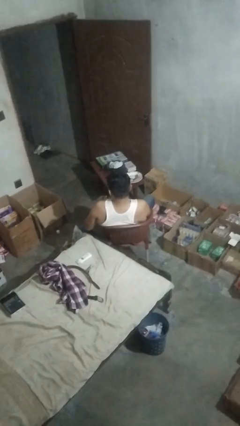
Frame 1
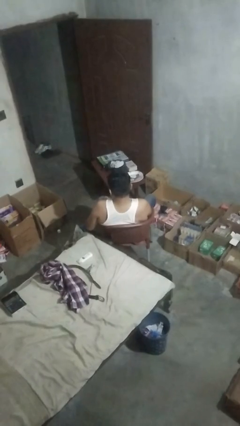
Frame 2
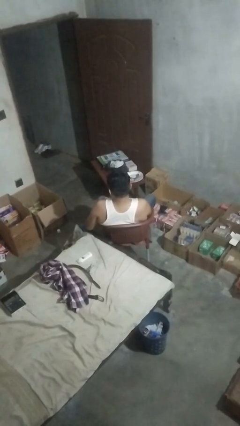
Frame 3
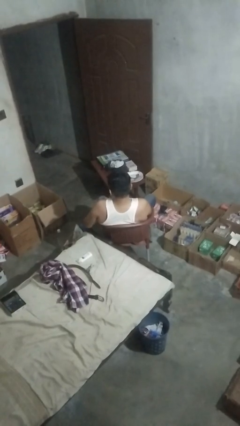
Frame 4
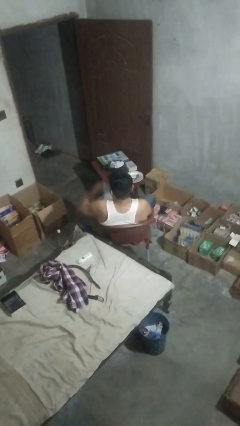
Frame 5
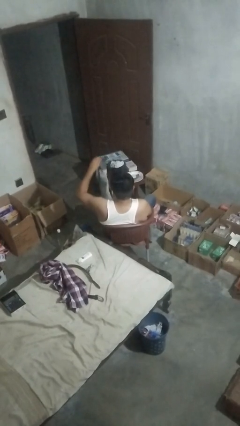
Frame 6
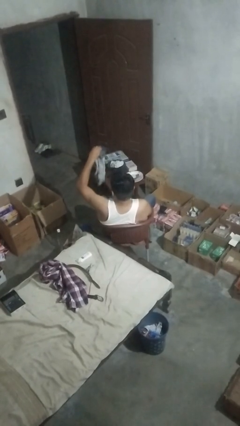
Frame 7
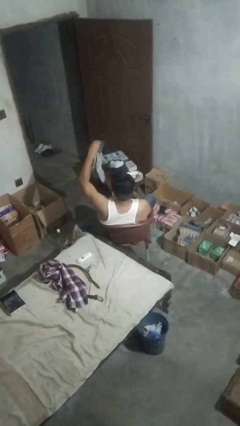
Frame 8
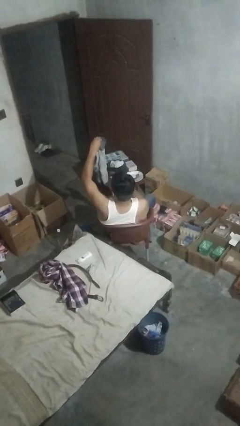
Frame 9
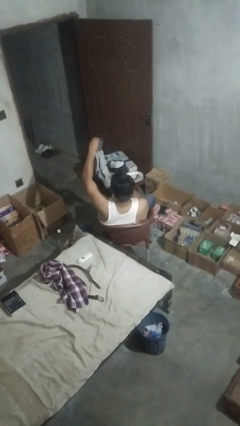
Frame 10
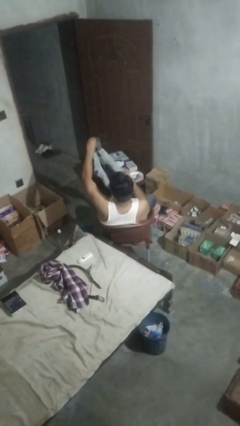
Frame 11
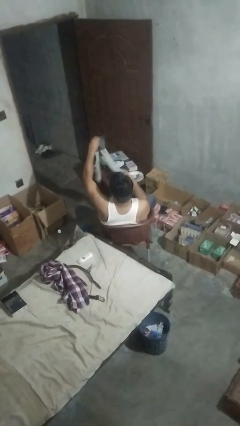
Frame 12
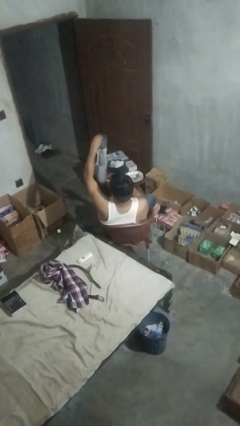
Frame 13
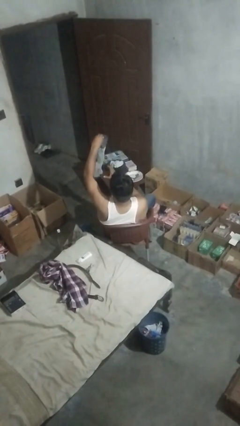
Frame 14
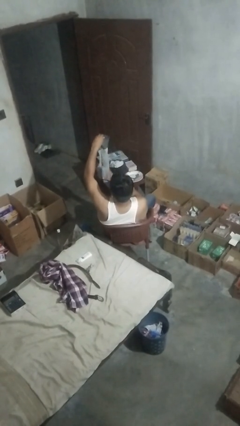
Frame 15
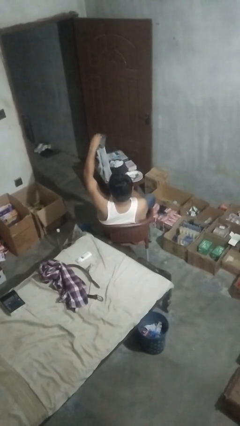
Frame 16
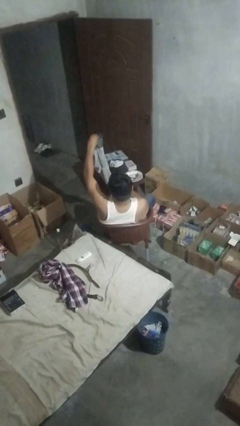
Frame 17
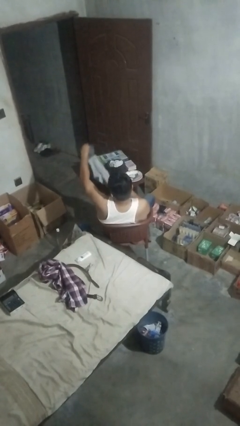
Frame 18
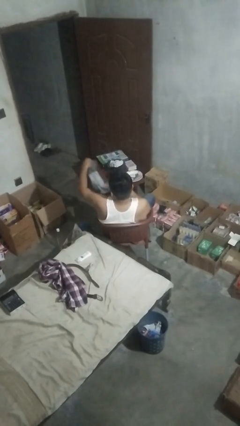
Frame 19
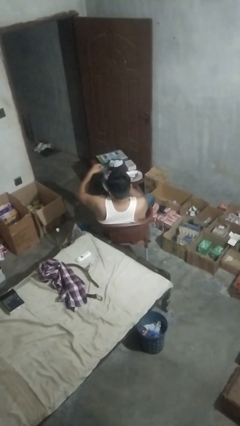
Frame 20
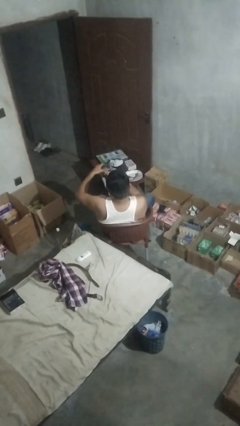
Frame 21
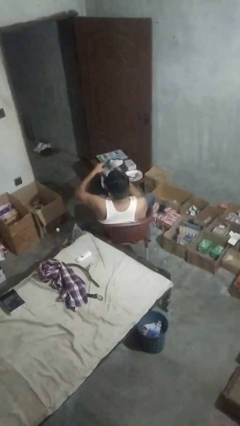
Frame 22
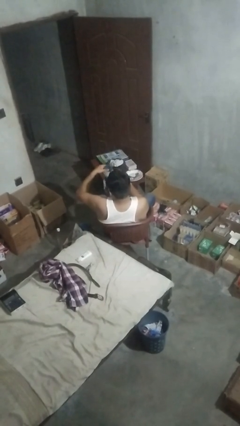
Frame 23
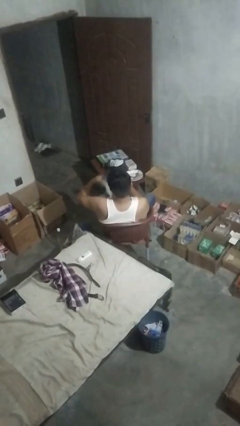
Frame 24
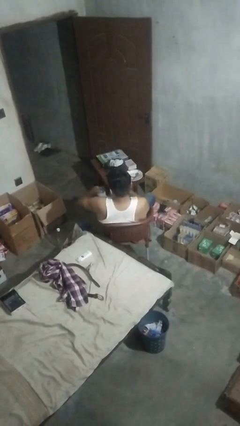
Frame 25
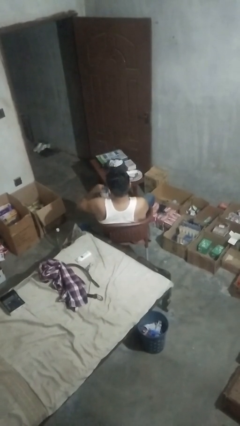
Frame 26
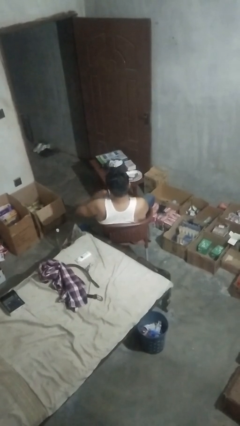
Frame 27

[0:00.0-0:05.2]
person folds socks

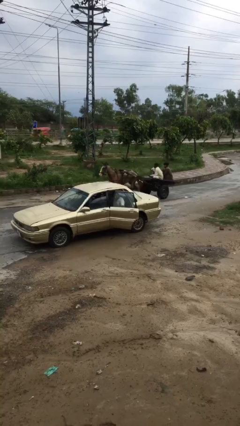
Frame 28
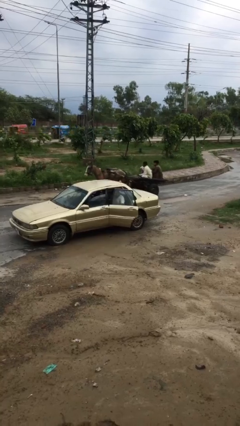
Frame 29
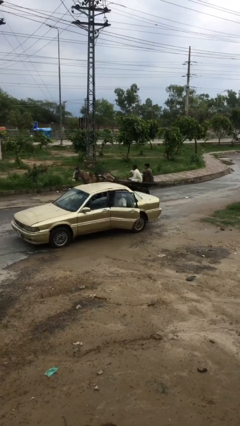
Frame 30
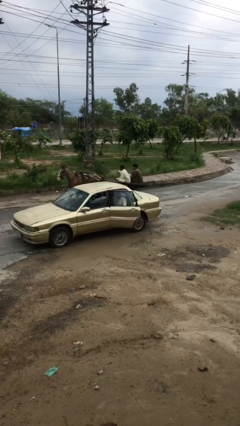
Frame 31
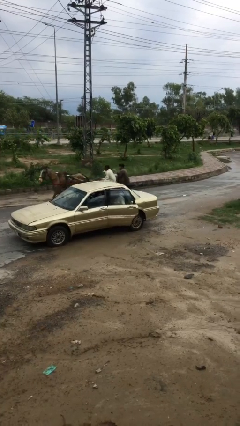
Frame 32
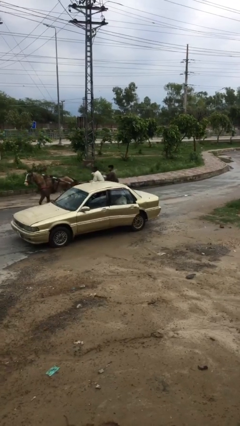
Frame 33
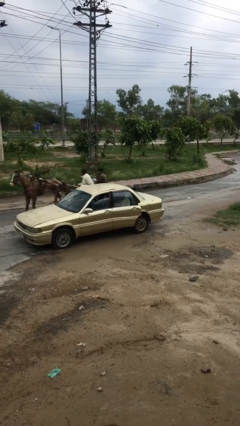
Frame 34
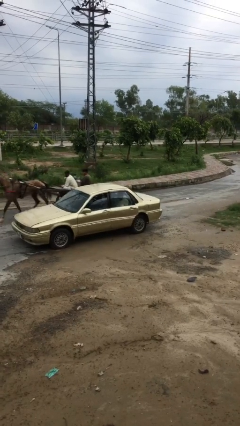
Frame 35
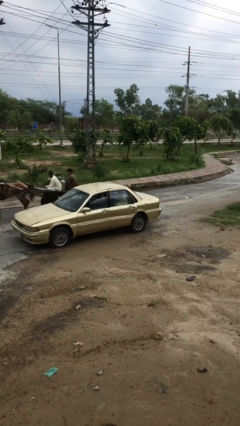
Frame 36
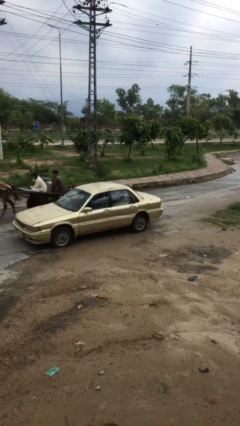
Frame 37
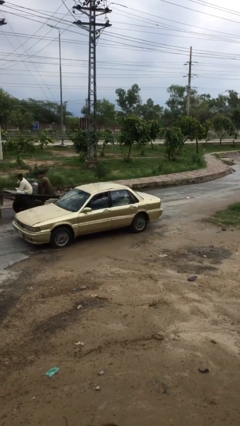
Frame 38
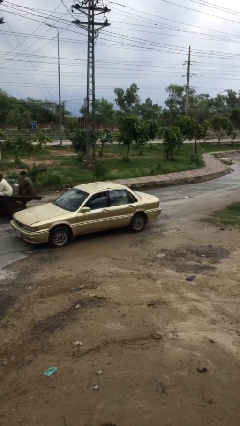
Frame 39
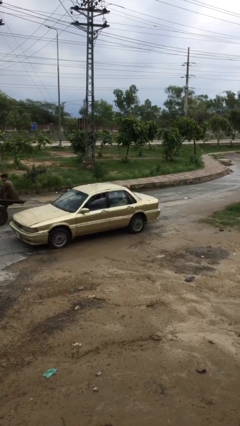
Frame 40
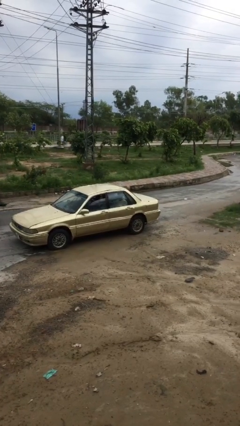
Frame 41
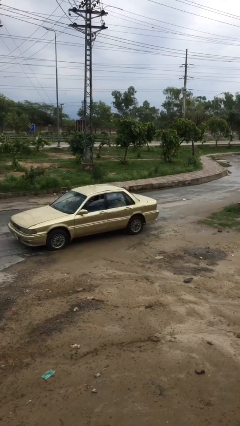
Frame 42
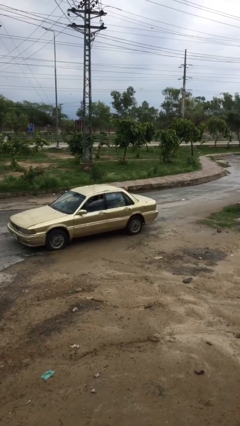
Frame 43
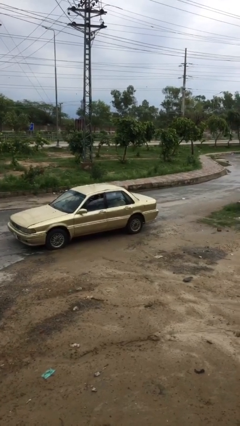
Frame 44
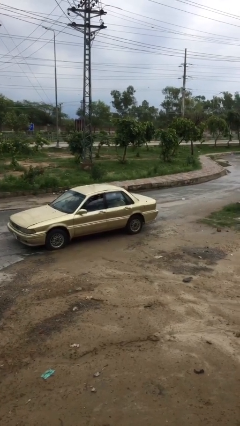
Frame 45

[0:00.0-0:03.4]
person closes car door

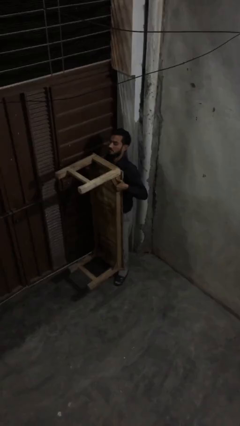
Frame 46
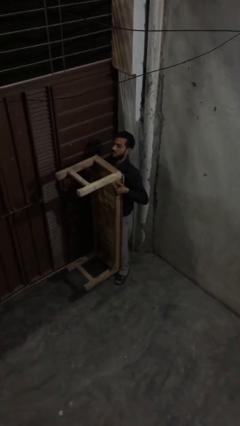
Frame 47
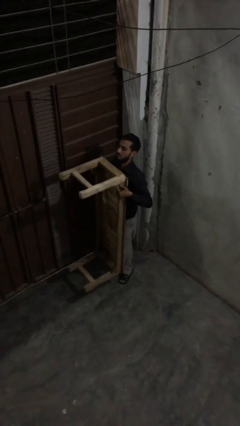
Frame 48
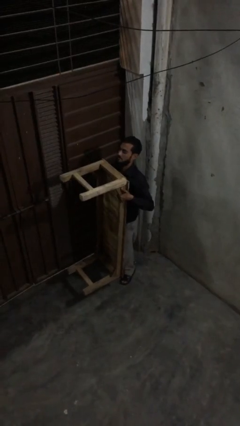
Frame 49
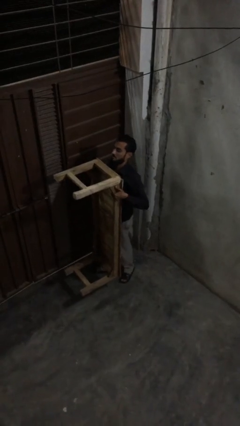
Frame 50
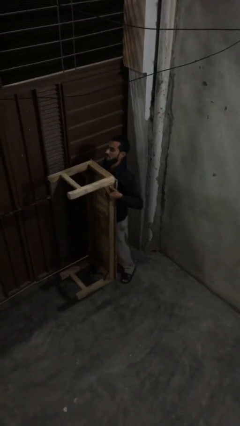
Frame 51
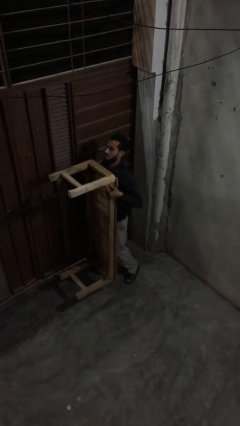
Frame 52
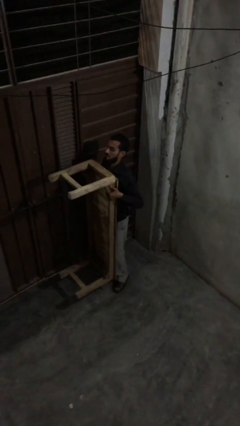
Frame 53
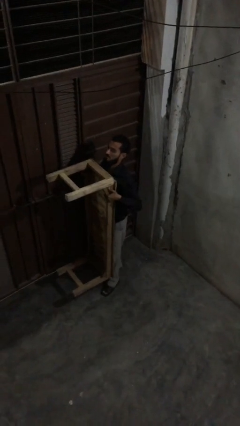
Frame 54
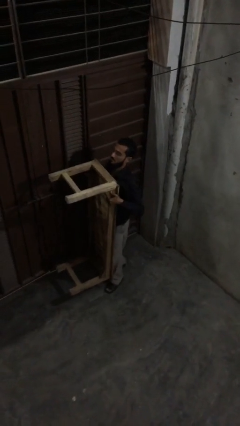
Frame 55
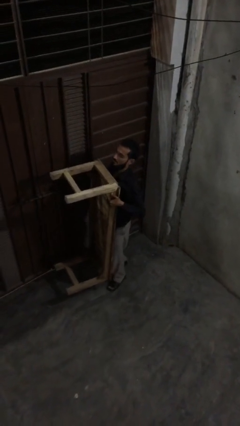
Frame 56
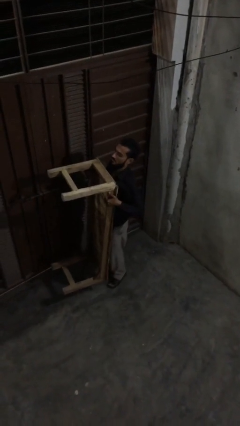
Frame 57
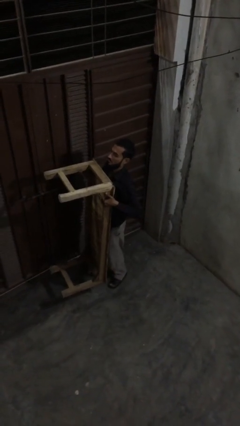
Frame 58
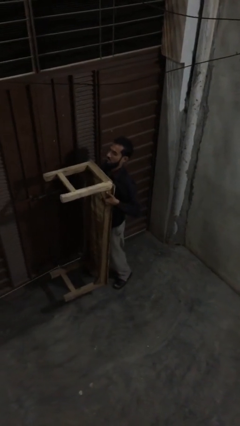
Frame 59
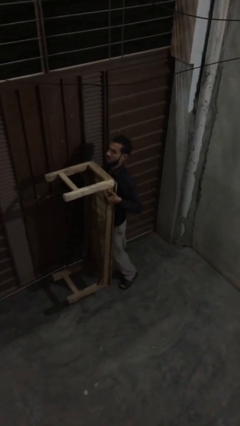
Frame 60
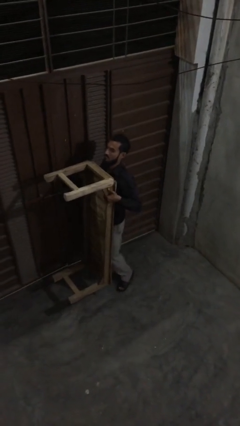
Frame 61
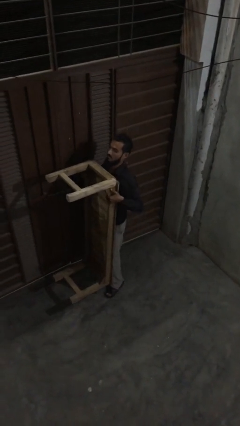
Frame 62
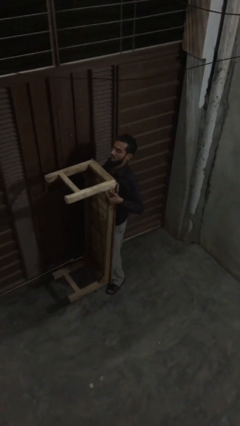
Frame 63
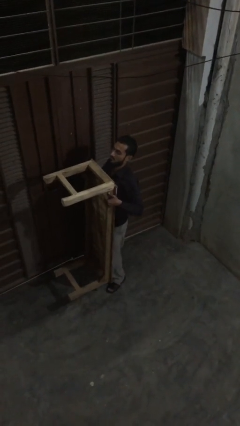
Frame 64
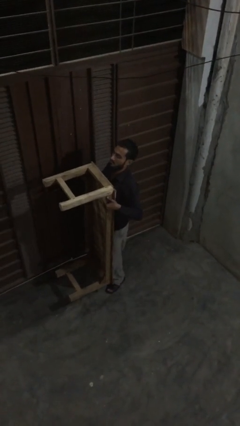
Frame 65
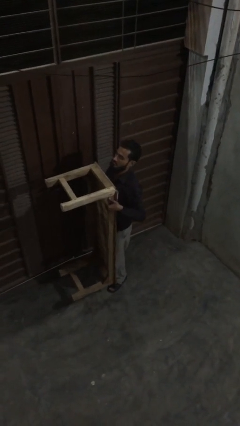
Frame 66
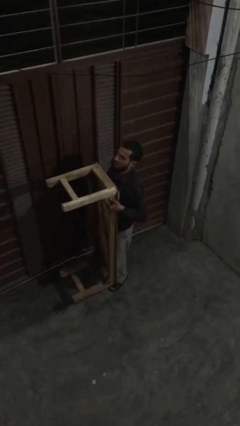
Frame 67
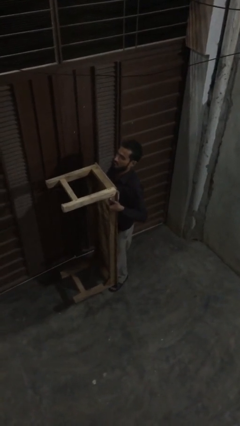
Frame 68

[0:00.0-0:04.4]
person carries heavy object

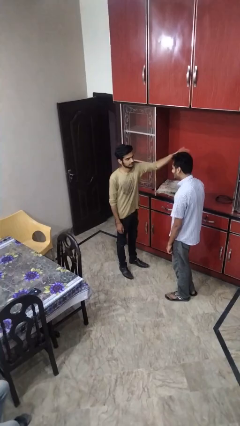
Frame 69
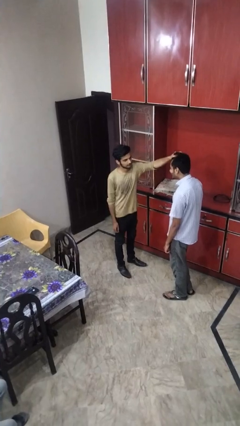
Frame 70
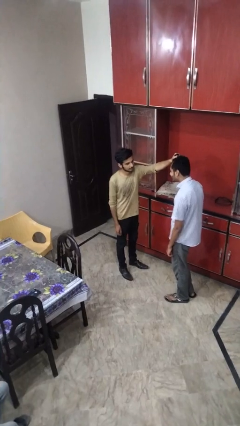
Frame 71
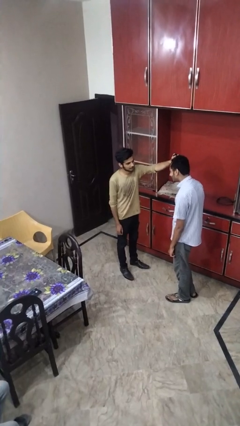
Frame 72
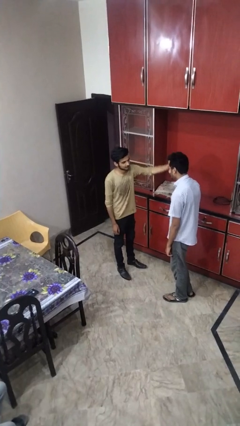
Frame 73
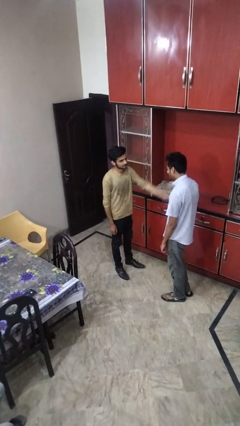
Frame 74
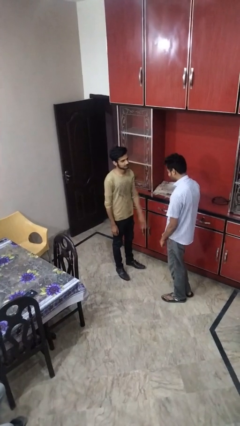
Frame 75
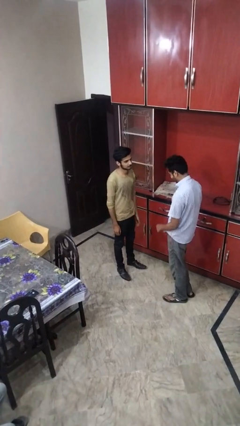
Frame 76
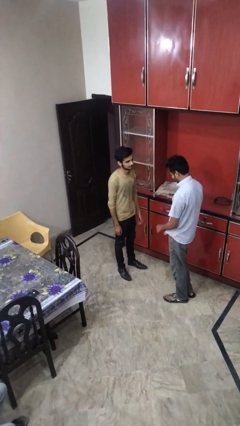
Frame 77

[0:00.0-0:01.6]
person grabs person by hair

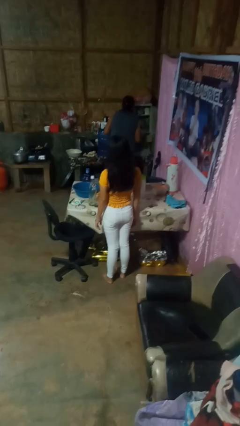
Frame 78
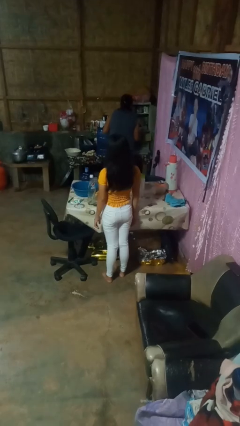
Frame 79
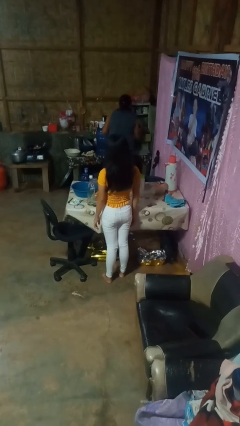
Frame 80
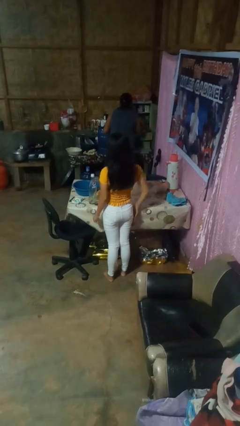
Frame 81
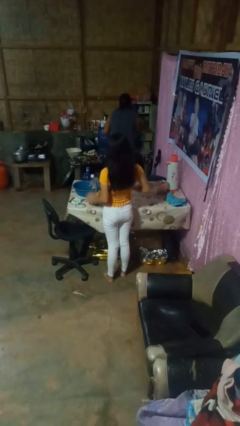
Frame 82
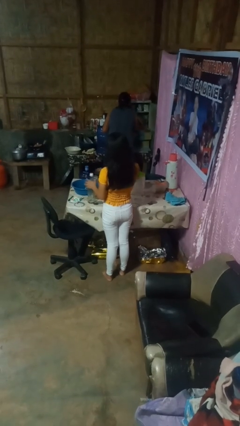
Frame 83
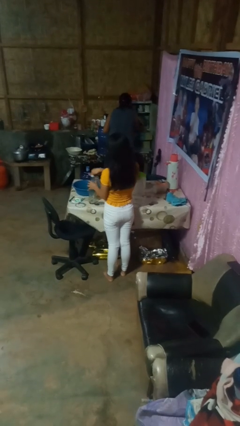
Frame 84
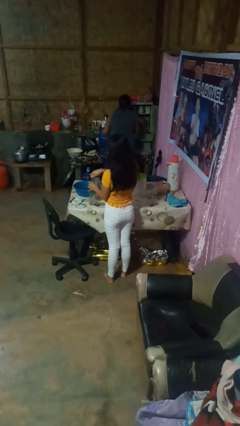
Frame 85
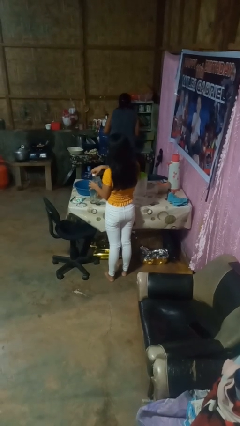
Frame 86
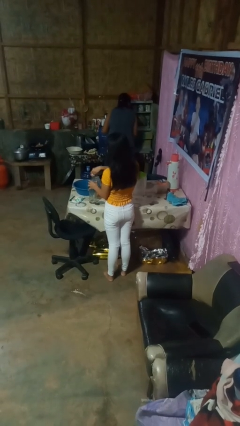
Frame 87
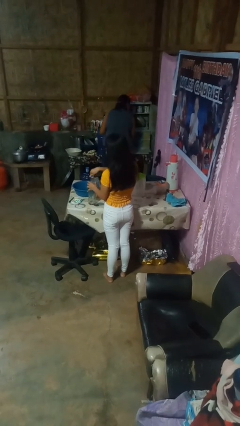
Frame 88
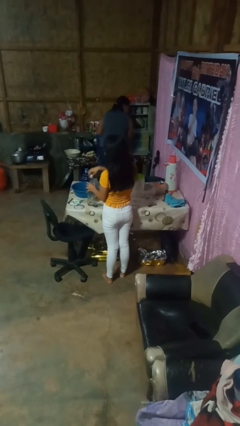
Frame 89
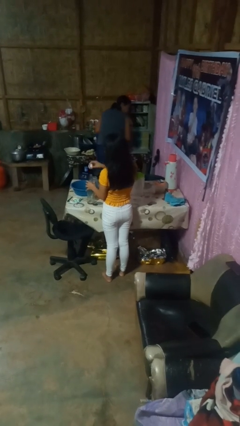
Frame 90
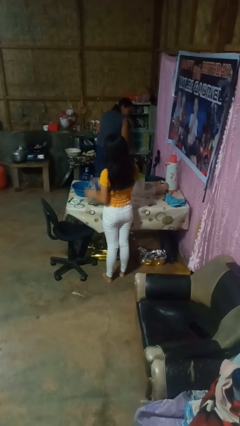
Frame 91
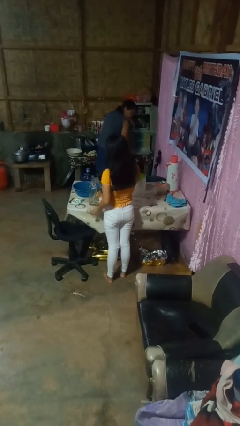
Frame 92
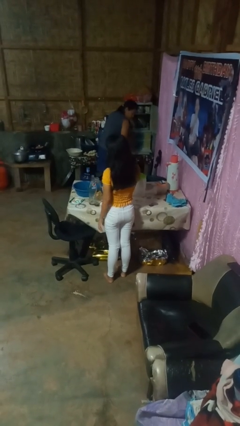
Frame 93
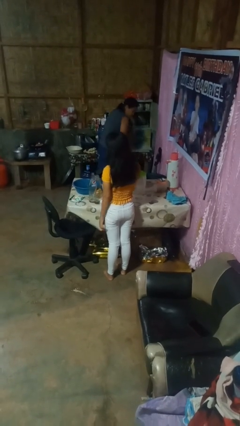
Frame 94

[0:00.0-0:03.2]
person unscrews lid from bottle
